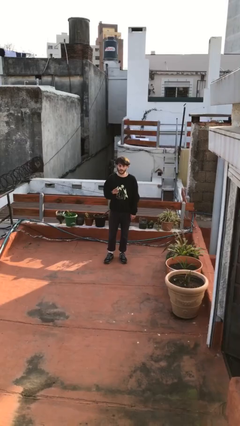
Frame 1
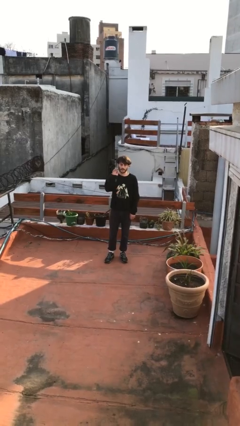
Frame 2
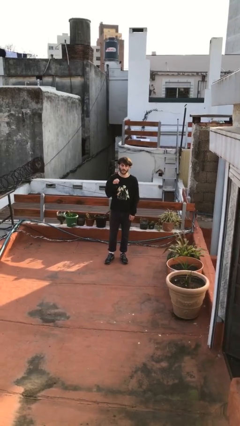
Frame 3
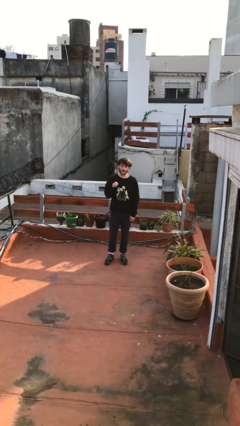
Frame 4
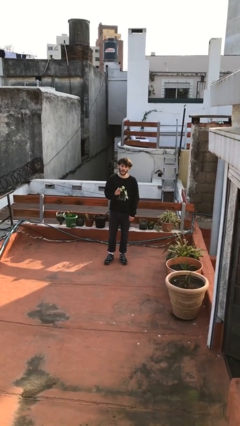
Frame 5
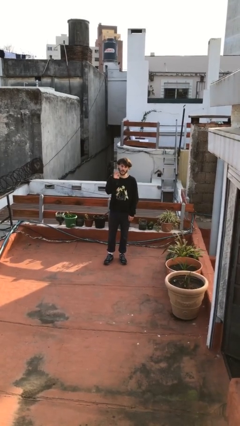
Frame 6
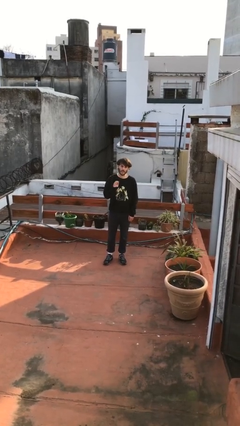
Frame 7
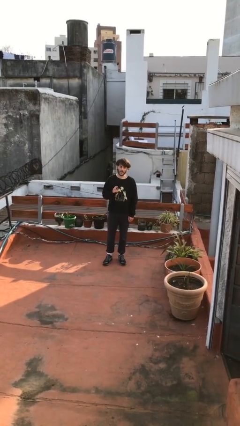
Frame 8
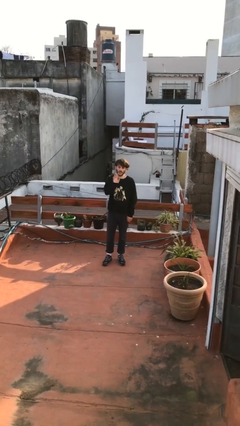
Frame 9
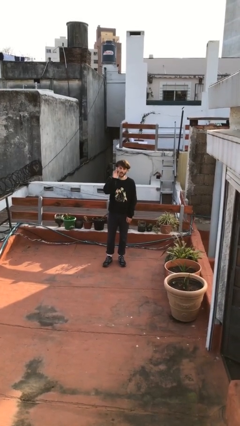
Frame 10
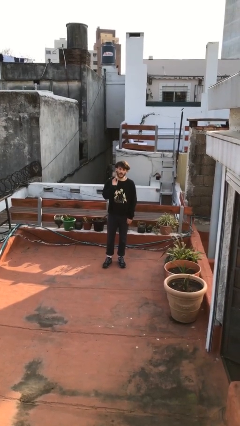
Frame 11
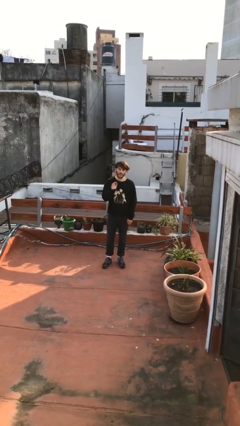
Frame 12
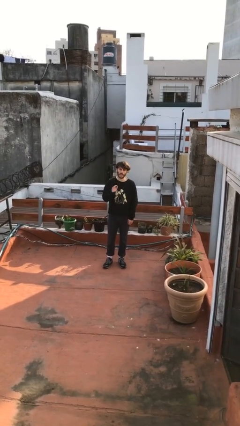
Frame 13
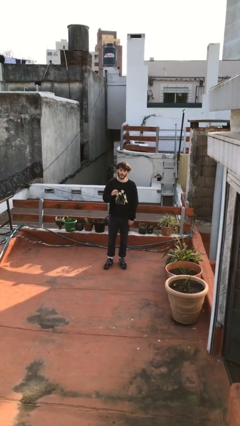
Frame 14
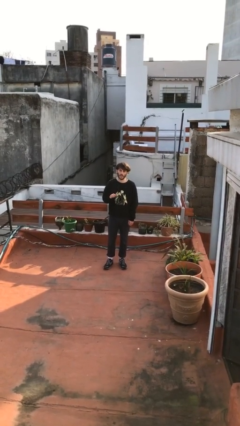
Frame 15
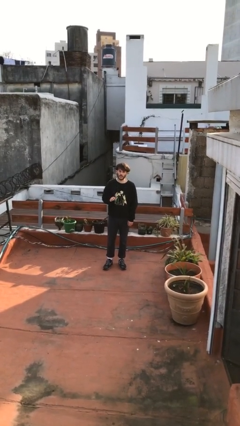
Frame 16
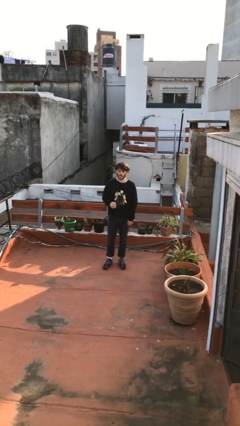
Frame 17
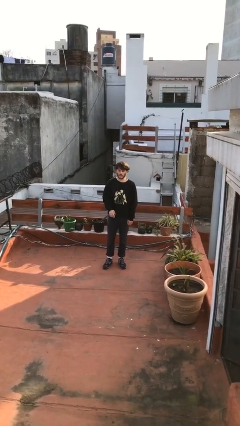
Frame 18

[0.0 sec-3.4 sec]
person gestures swipe up

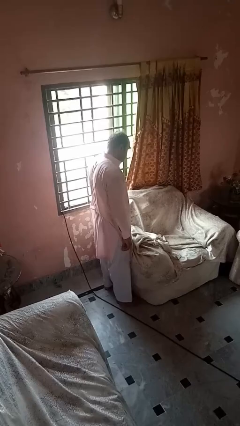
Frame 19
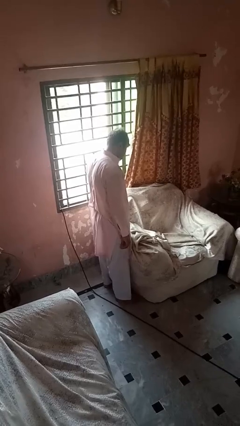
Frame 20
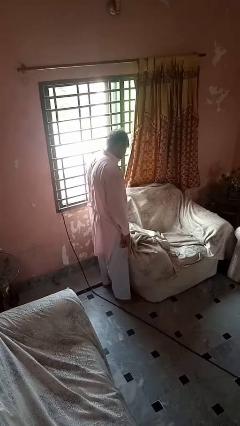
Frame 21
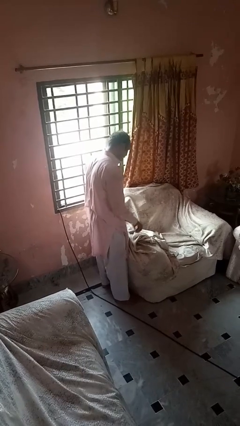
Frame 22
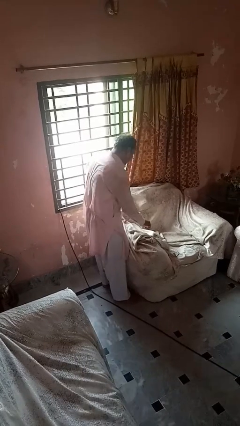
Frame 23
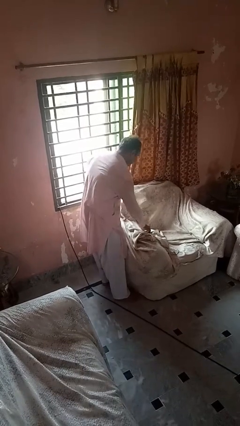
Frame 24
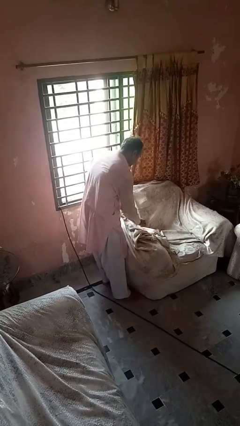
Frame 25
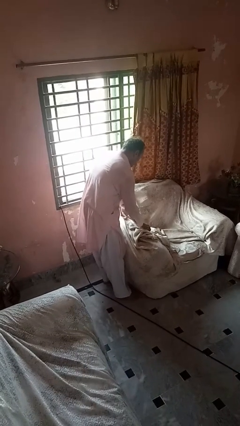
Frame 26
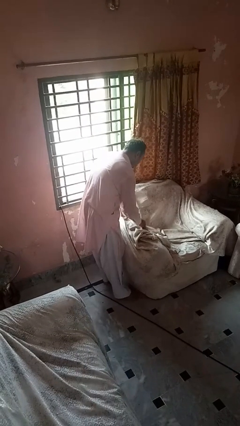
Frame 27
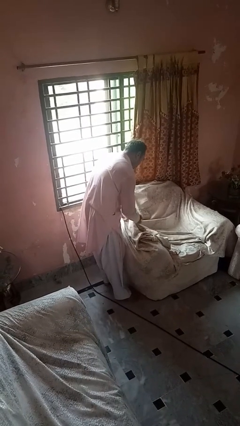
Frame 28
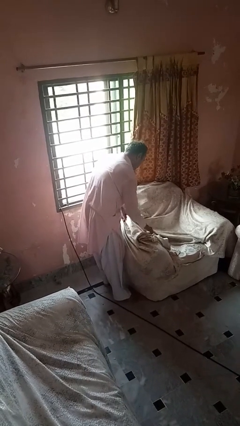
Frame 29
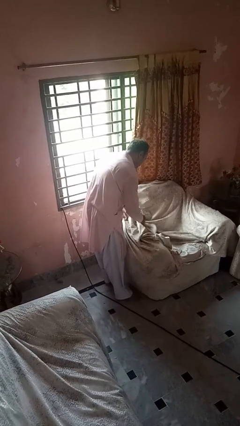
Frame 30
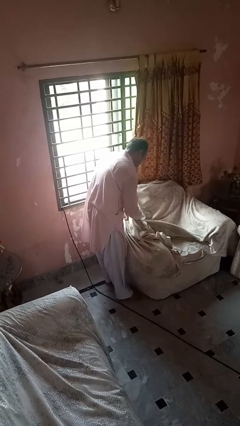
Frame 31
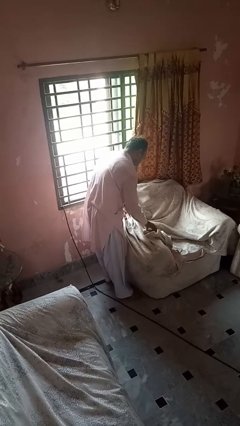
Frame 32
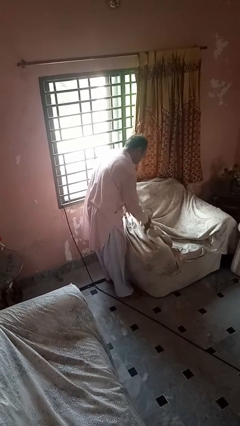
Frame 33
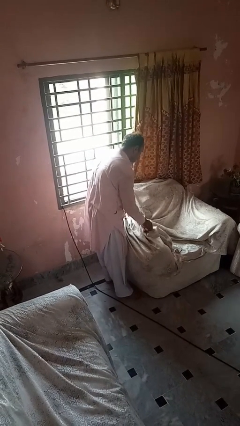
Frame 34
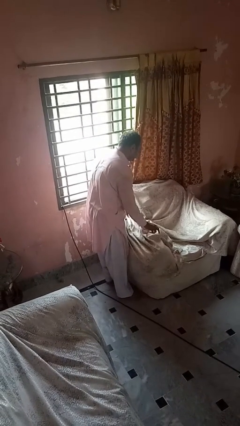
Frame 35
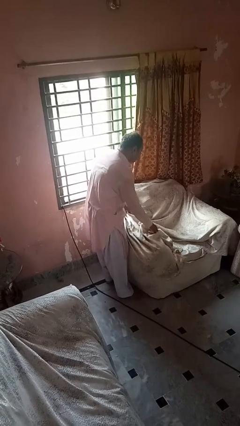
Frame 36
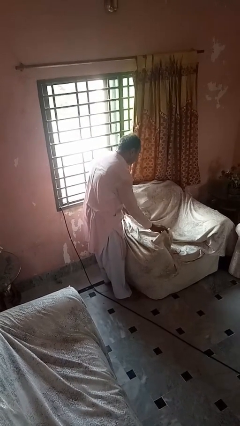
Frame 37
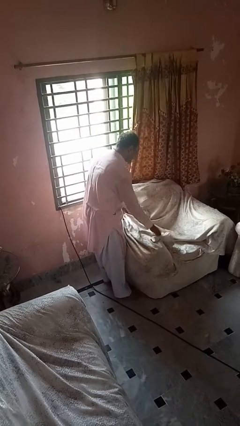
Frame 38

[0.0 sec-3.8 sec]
person searches in couch

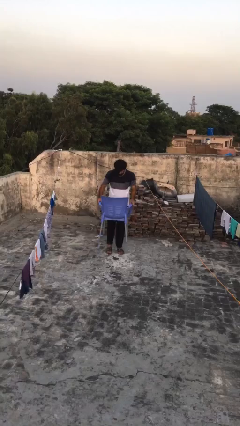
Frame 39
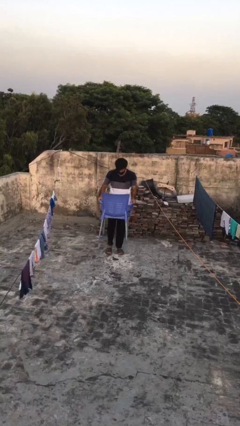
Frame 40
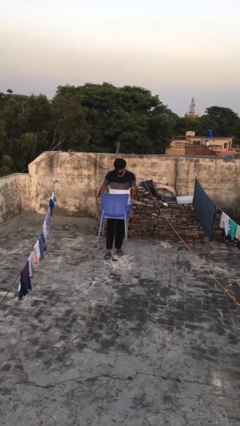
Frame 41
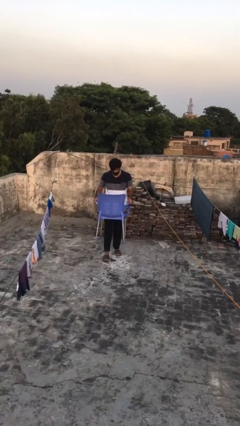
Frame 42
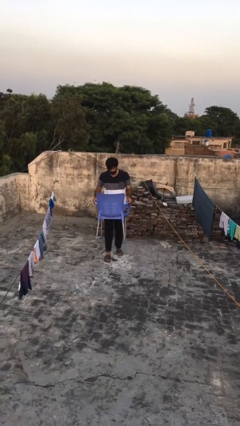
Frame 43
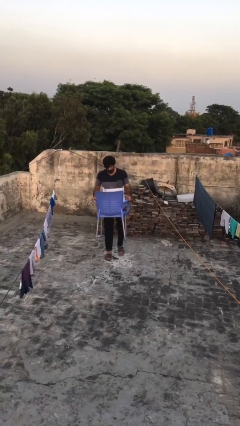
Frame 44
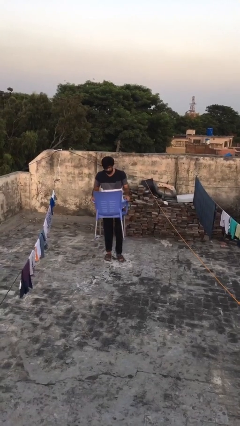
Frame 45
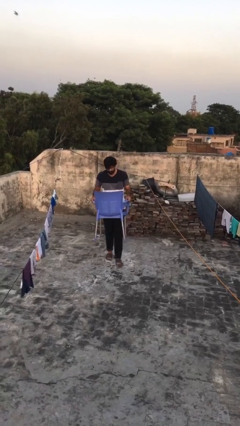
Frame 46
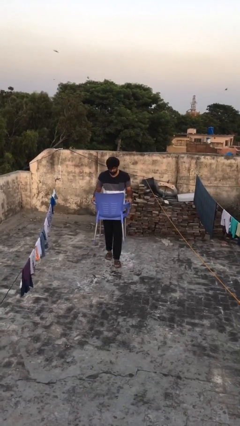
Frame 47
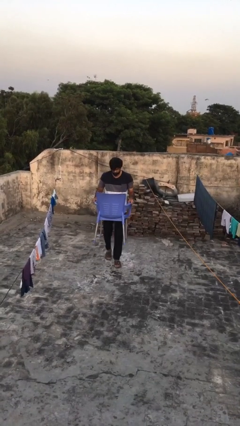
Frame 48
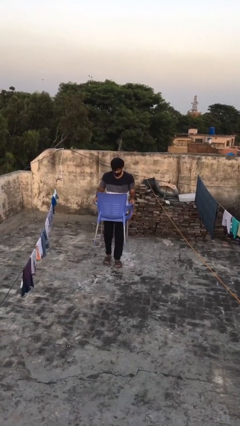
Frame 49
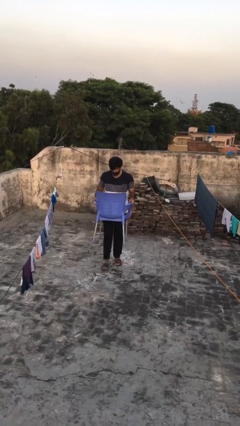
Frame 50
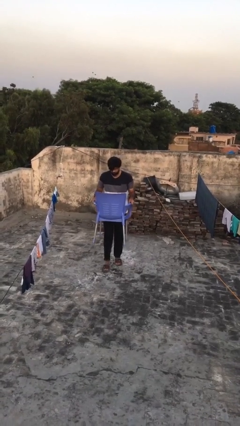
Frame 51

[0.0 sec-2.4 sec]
person carries heavy object

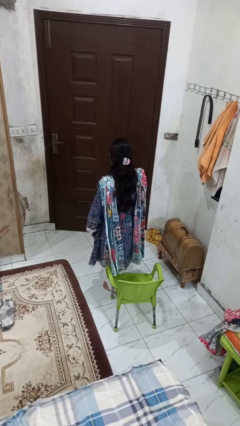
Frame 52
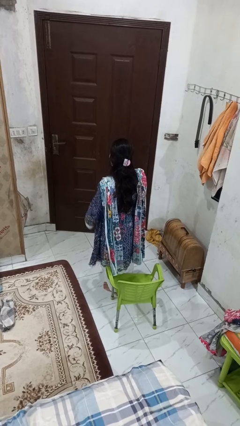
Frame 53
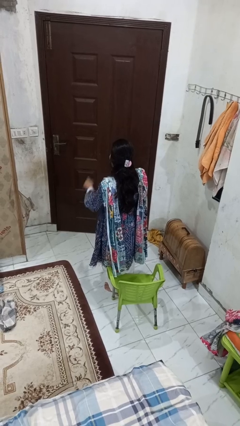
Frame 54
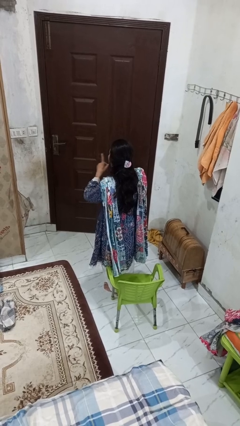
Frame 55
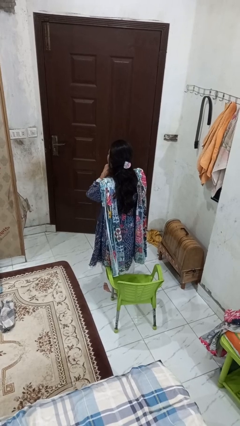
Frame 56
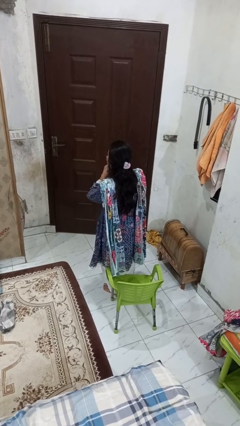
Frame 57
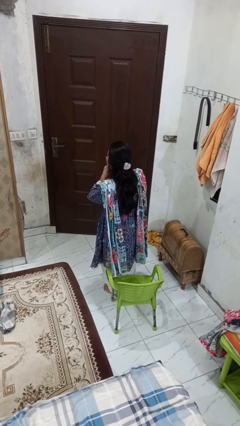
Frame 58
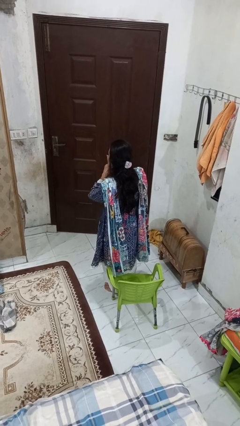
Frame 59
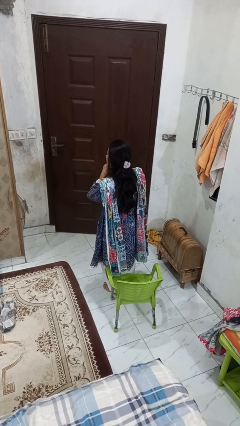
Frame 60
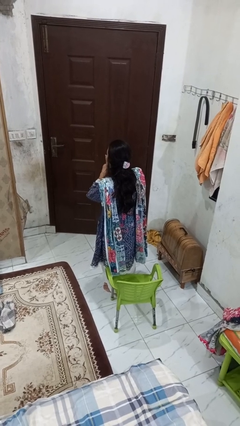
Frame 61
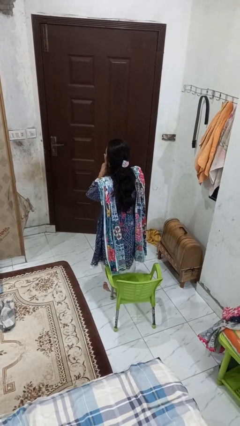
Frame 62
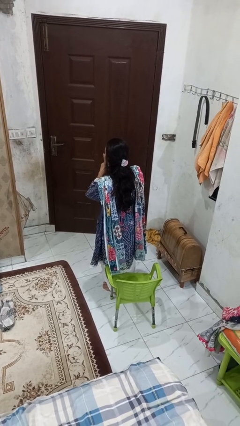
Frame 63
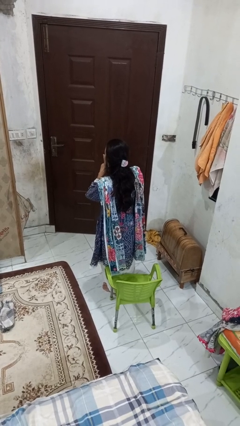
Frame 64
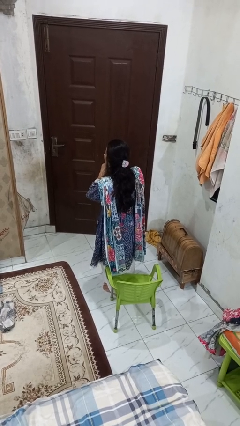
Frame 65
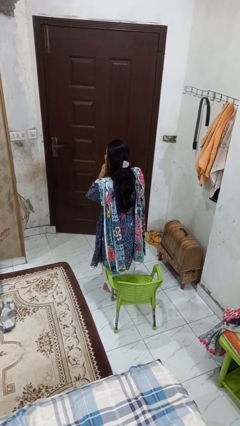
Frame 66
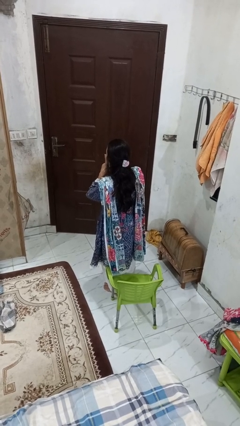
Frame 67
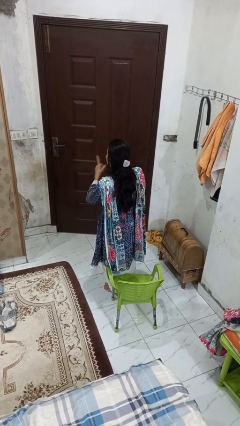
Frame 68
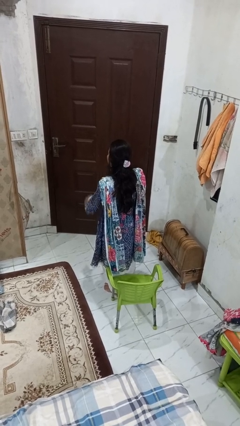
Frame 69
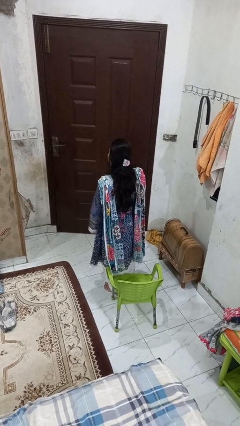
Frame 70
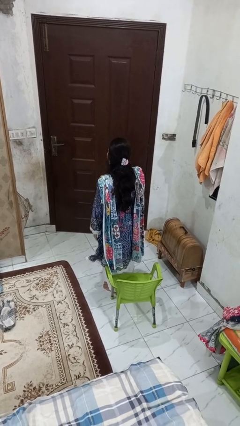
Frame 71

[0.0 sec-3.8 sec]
person gestures be quiet

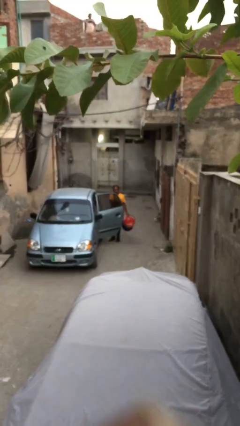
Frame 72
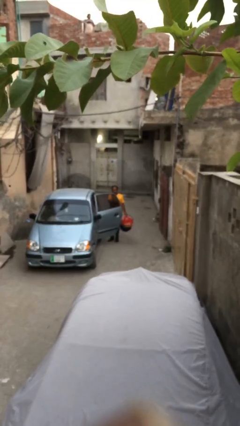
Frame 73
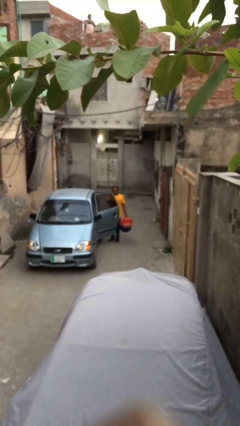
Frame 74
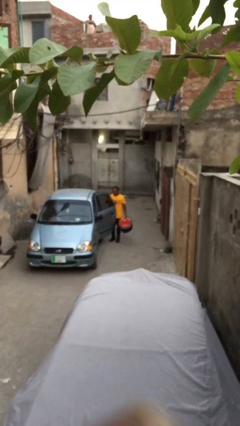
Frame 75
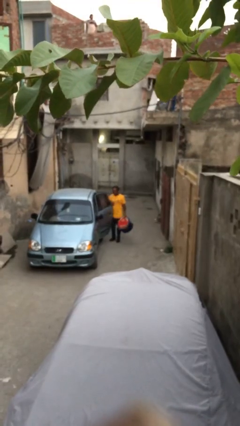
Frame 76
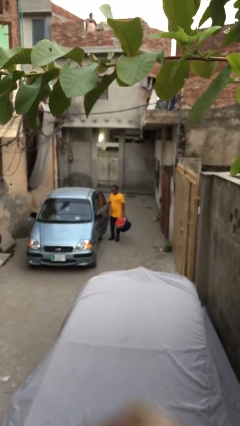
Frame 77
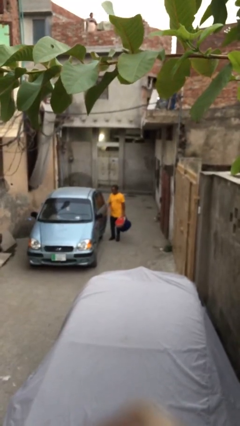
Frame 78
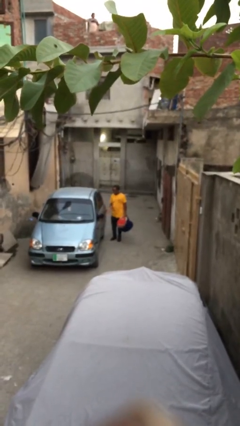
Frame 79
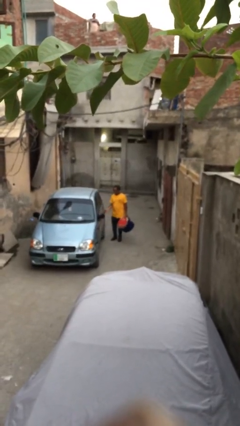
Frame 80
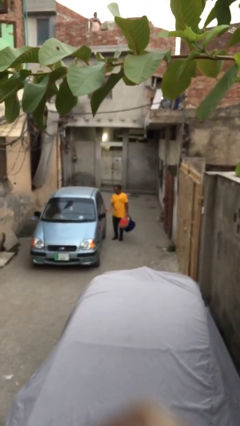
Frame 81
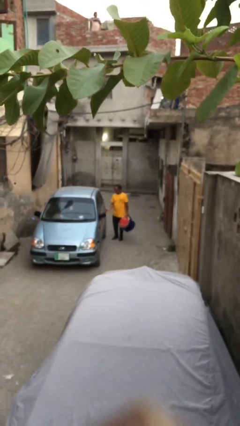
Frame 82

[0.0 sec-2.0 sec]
person closes car door

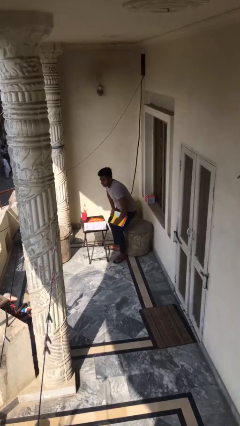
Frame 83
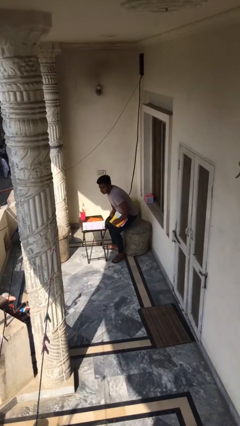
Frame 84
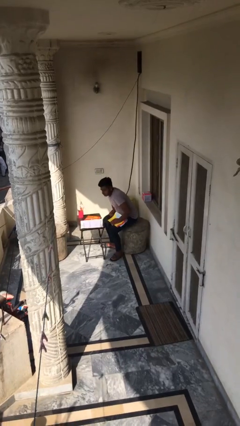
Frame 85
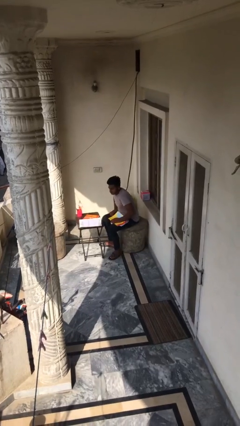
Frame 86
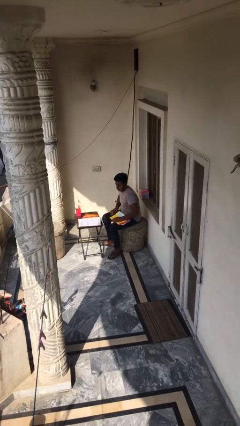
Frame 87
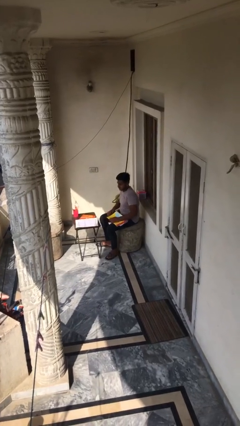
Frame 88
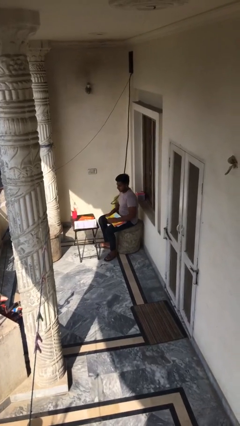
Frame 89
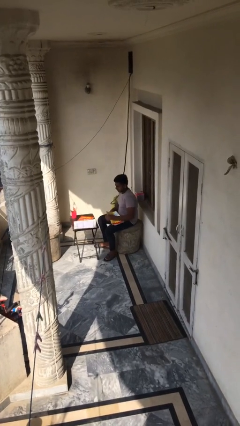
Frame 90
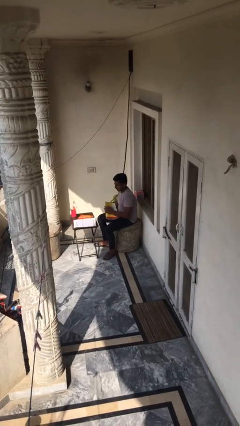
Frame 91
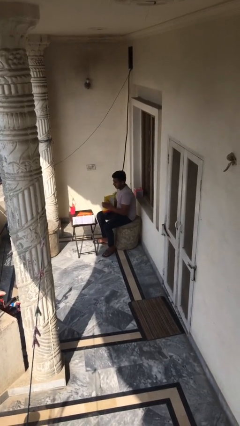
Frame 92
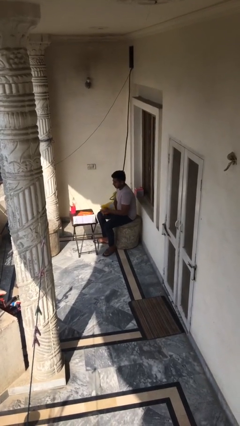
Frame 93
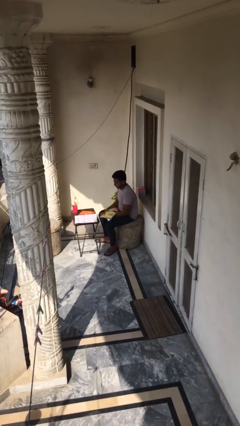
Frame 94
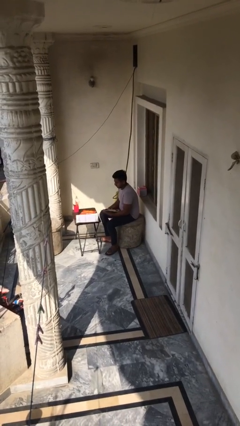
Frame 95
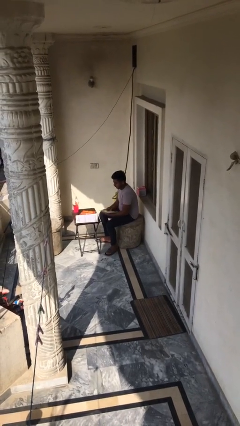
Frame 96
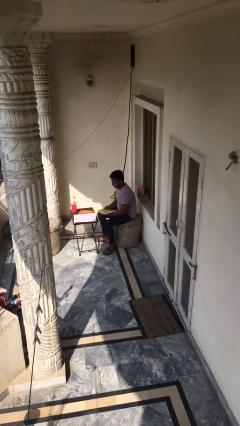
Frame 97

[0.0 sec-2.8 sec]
person sits down
